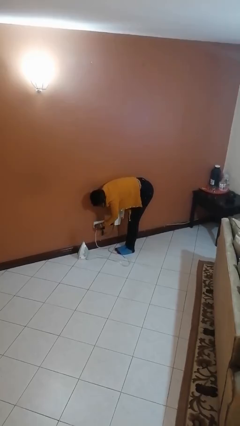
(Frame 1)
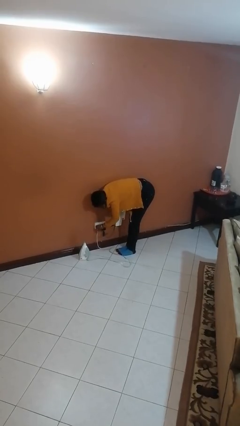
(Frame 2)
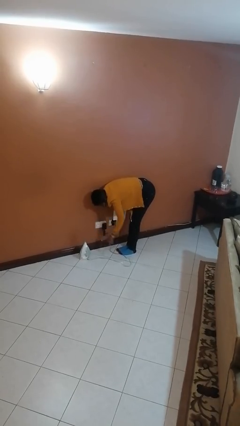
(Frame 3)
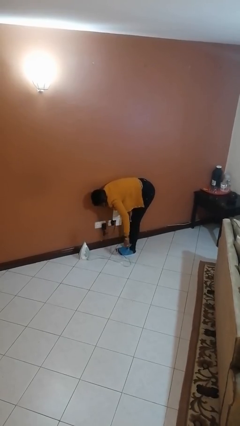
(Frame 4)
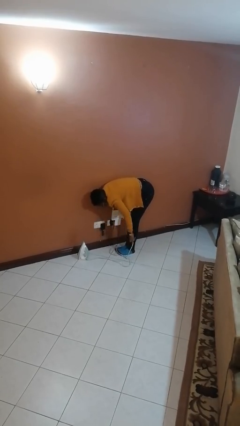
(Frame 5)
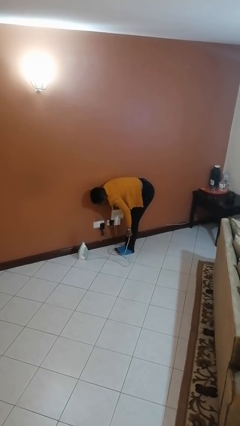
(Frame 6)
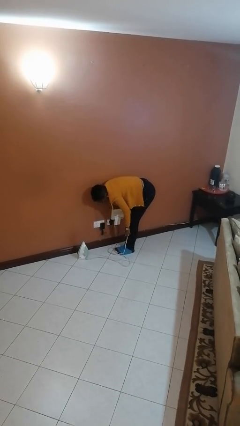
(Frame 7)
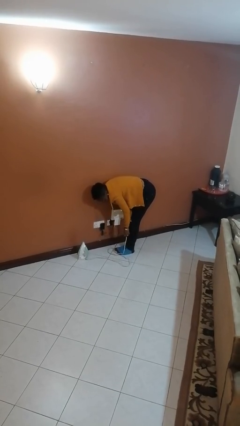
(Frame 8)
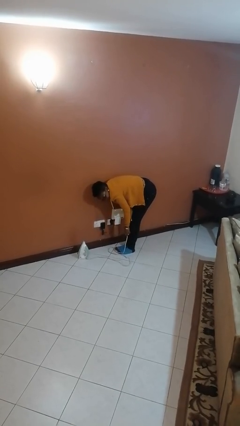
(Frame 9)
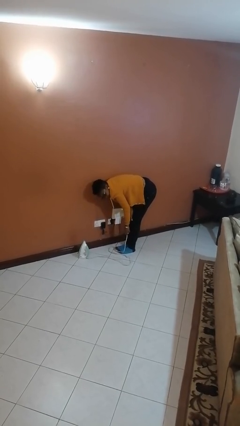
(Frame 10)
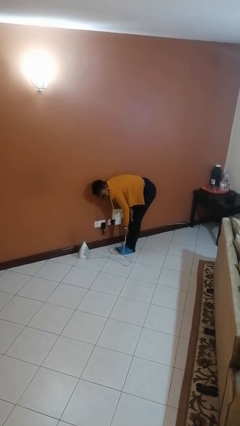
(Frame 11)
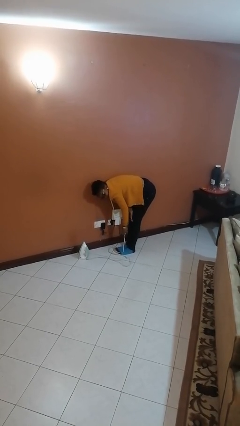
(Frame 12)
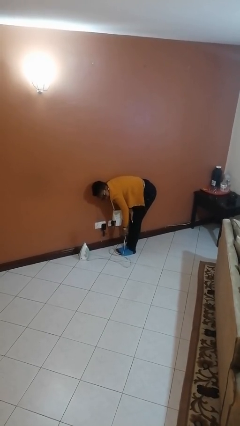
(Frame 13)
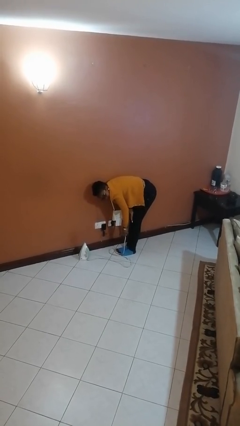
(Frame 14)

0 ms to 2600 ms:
person unplugs from electrical socket

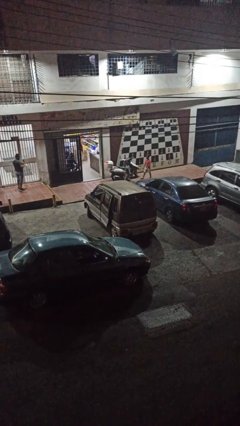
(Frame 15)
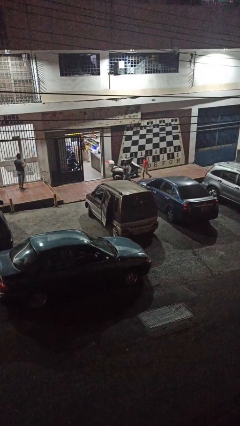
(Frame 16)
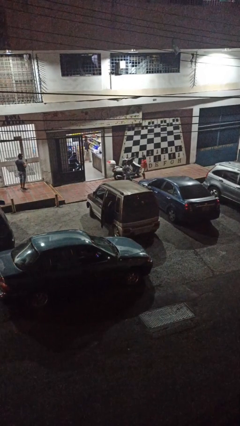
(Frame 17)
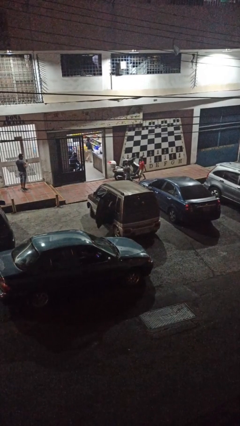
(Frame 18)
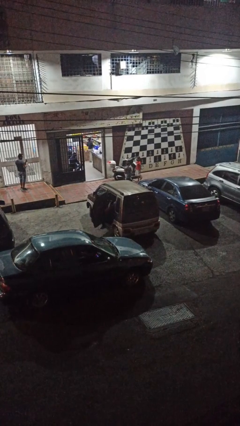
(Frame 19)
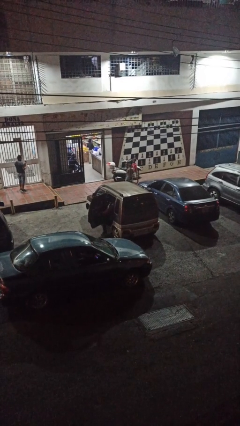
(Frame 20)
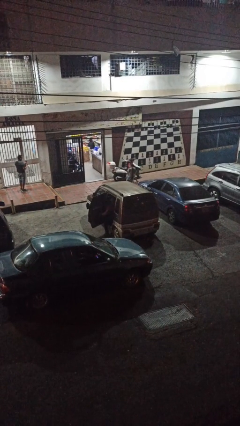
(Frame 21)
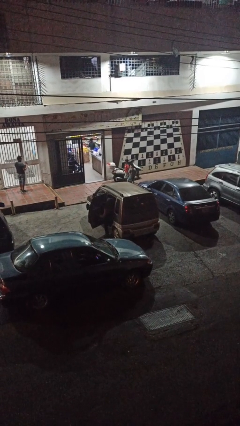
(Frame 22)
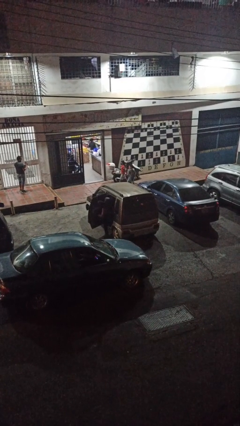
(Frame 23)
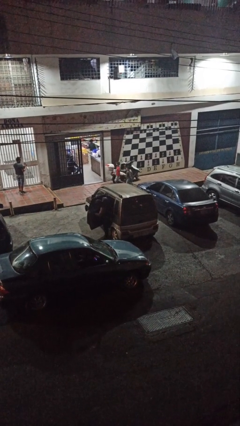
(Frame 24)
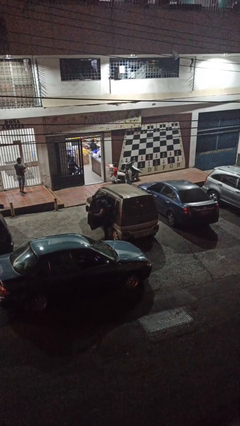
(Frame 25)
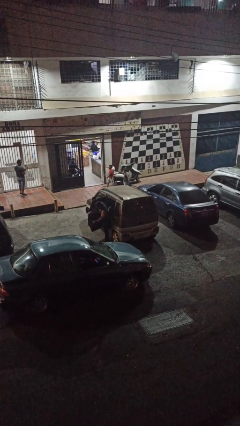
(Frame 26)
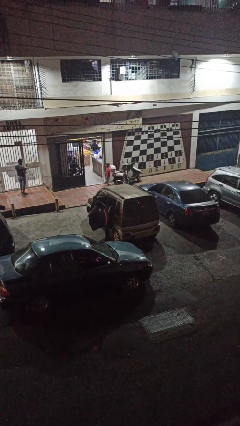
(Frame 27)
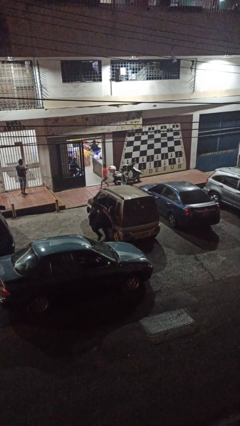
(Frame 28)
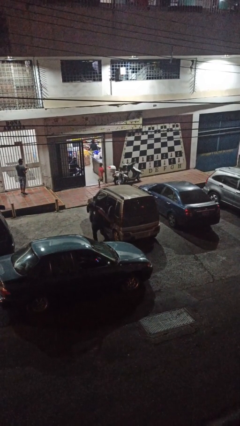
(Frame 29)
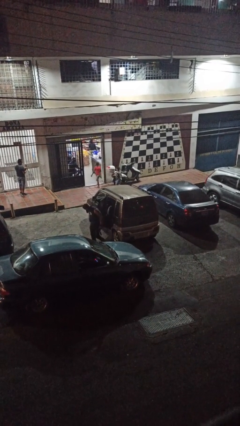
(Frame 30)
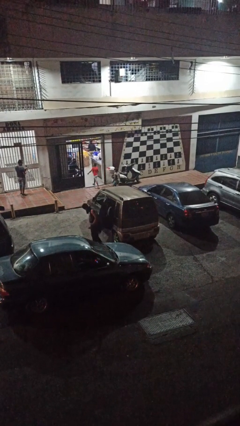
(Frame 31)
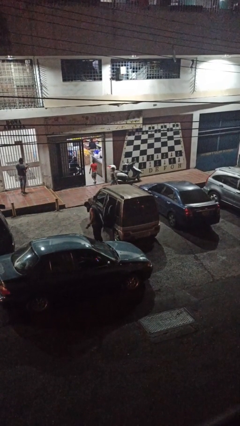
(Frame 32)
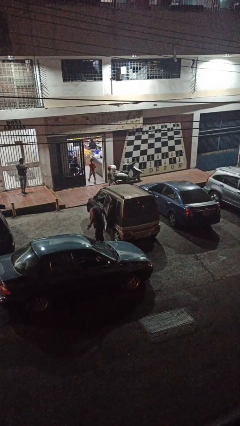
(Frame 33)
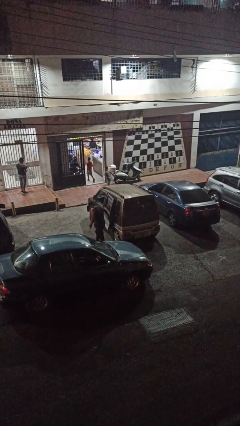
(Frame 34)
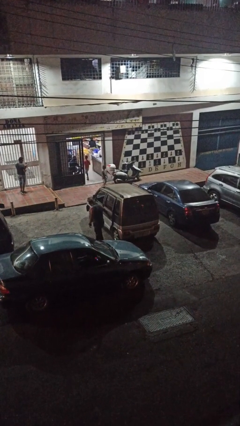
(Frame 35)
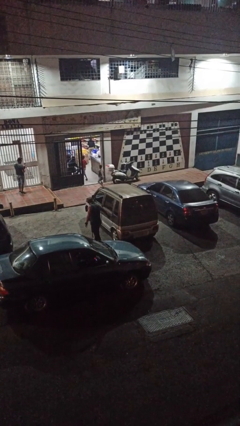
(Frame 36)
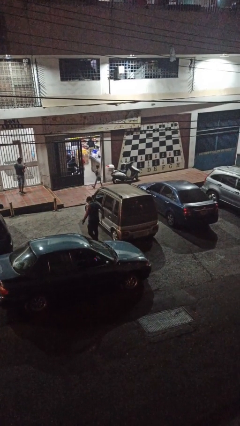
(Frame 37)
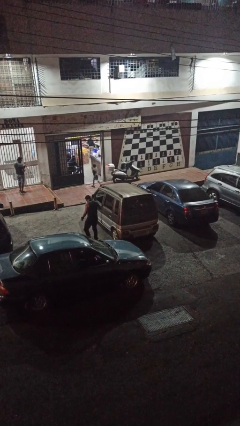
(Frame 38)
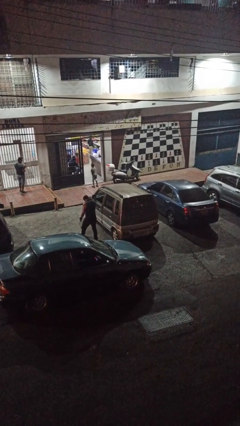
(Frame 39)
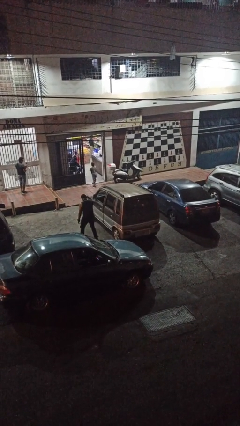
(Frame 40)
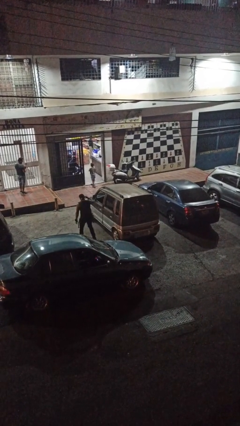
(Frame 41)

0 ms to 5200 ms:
car drops off person

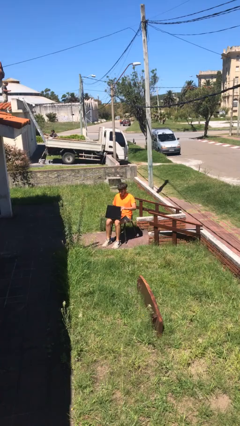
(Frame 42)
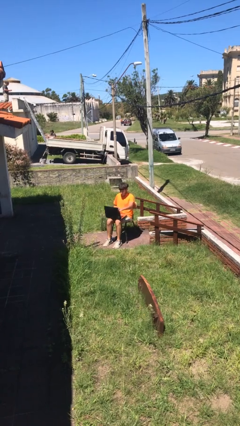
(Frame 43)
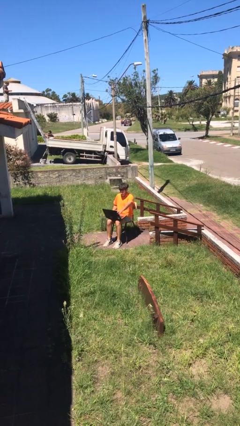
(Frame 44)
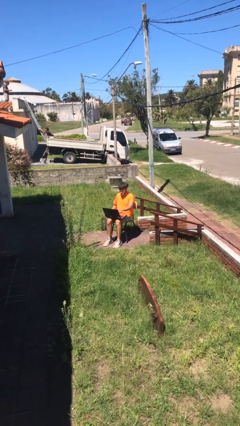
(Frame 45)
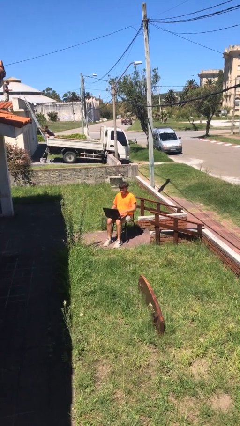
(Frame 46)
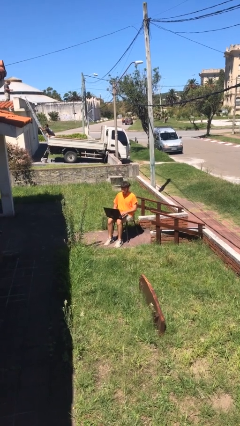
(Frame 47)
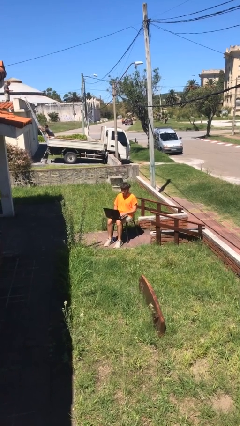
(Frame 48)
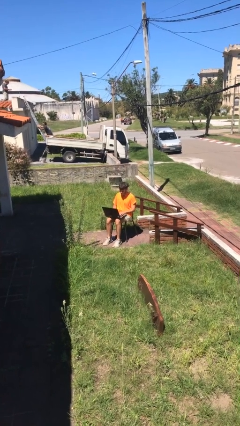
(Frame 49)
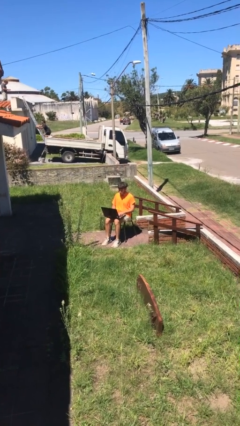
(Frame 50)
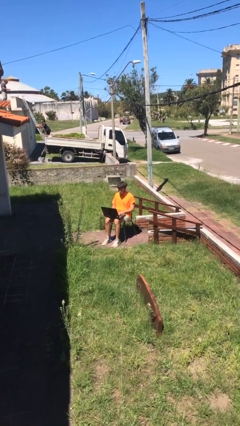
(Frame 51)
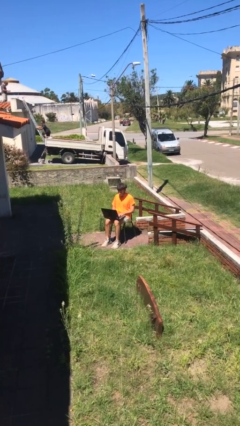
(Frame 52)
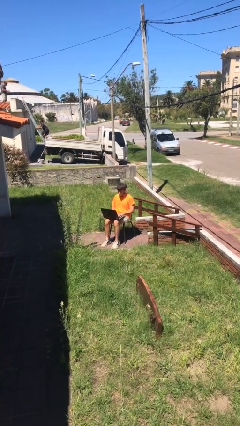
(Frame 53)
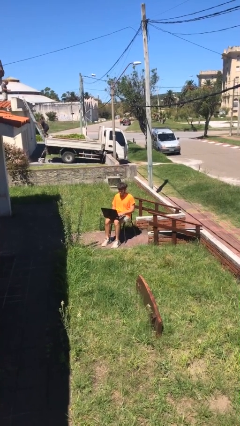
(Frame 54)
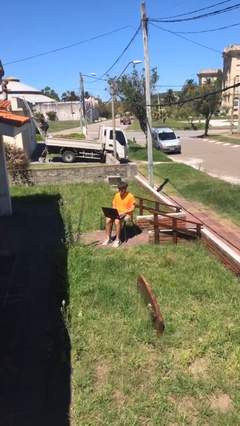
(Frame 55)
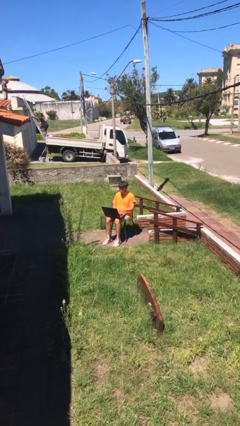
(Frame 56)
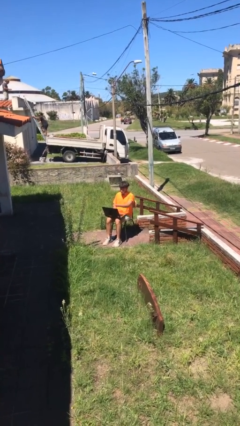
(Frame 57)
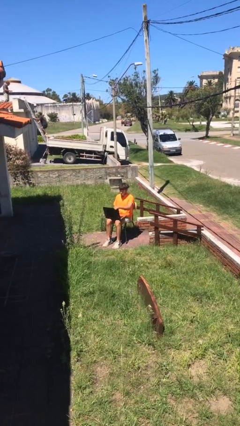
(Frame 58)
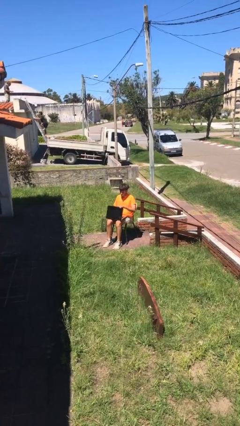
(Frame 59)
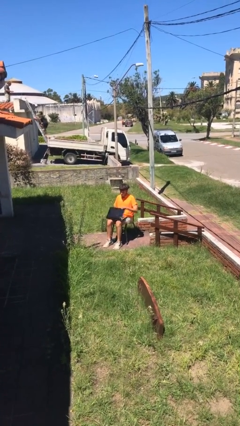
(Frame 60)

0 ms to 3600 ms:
person interacts with laptop

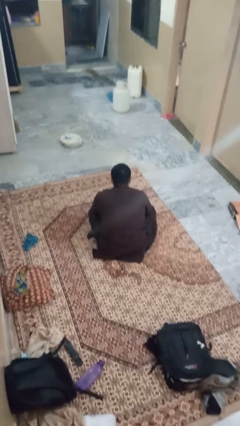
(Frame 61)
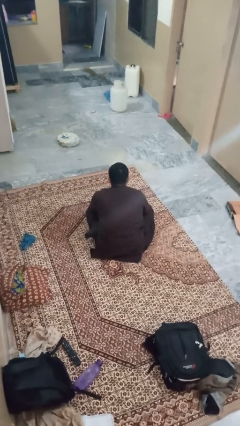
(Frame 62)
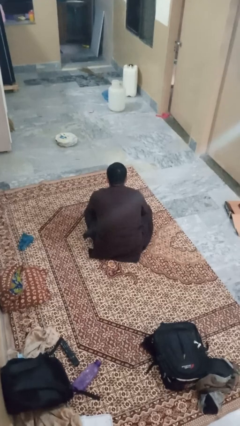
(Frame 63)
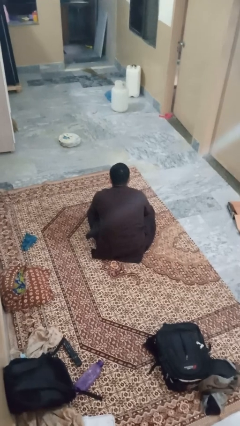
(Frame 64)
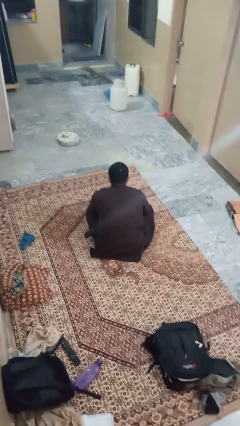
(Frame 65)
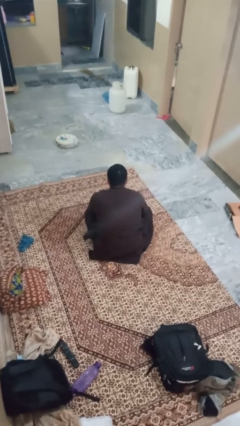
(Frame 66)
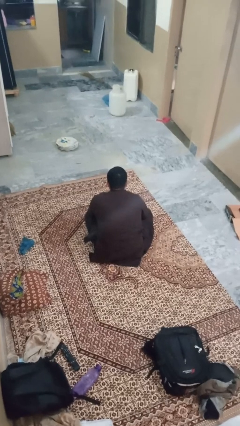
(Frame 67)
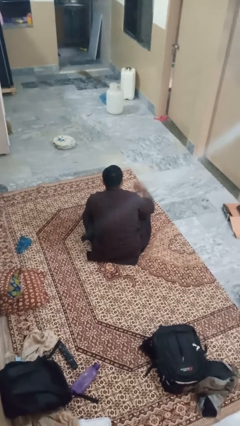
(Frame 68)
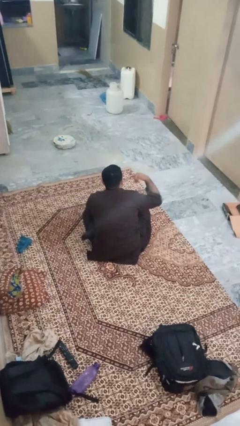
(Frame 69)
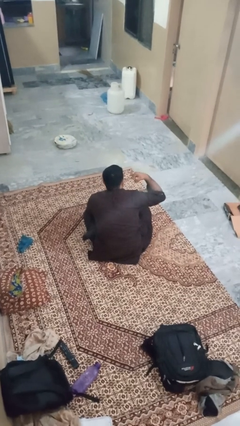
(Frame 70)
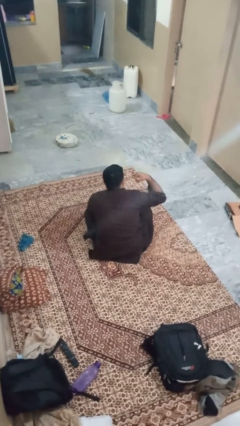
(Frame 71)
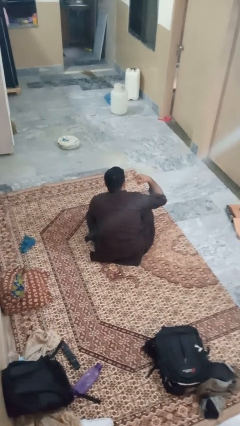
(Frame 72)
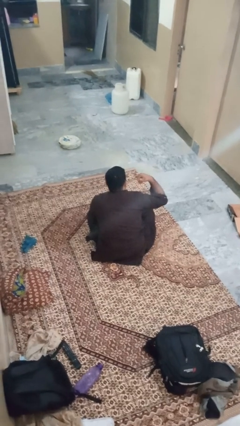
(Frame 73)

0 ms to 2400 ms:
person gestures call me

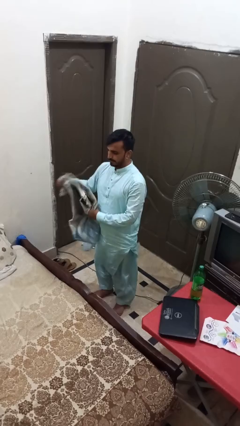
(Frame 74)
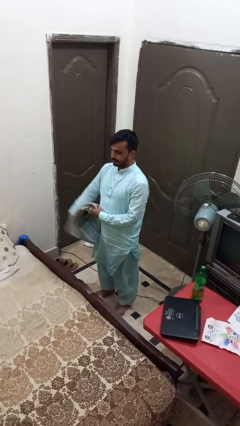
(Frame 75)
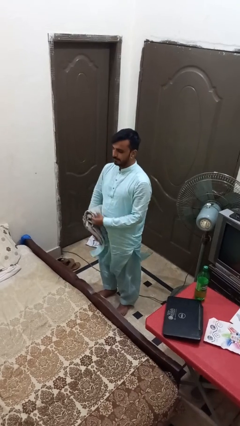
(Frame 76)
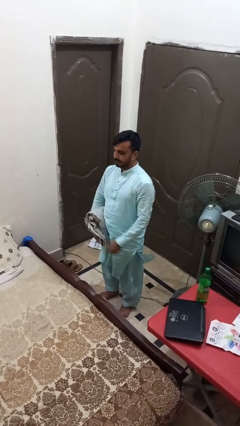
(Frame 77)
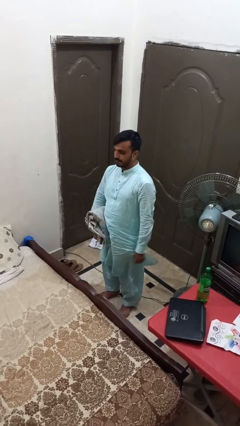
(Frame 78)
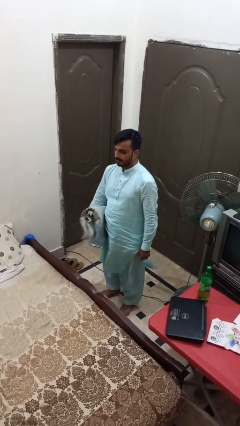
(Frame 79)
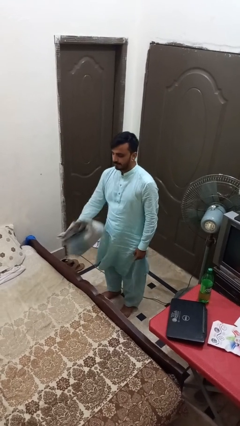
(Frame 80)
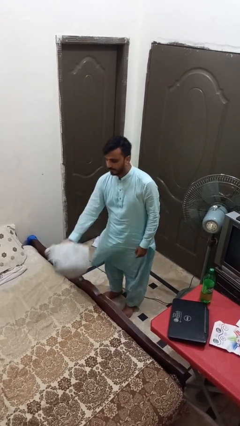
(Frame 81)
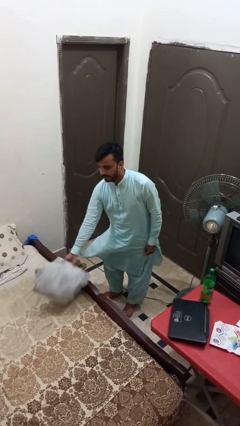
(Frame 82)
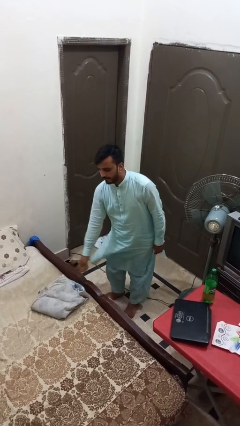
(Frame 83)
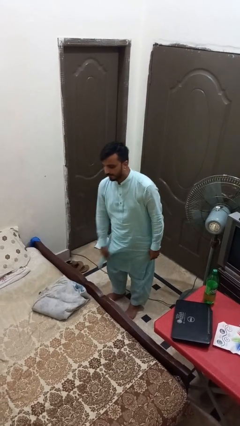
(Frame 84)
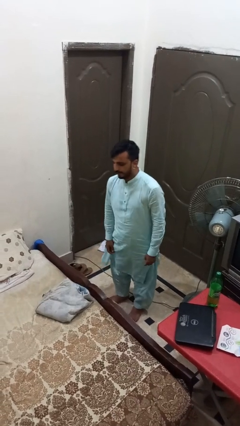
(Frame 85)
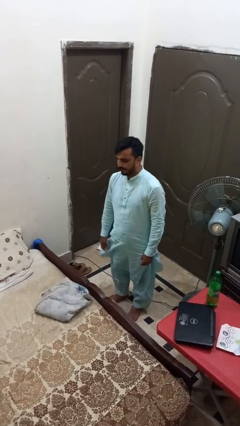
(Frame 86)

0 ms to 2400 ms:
person puts down object on bed

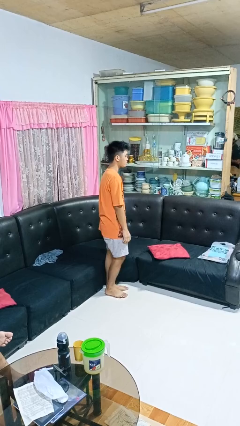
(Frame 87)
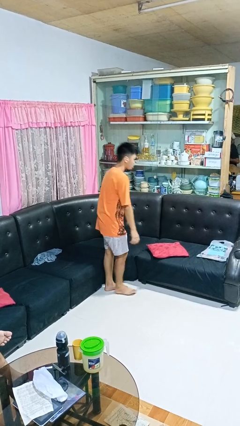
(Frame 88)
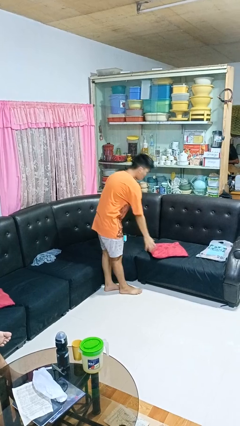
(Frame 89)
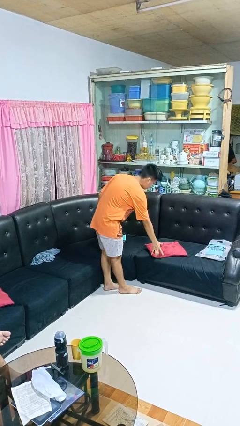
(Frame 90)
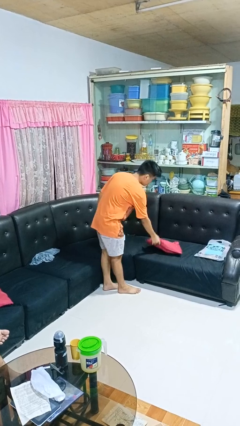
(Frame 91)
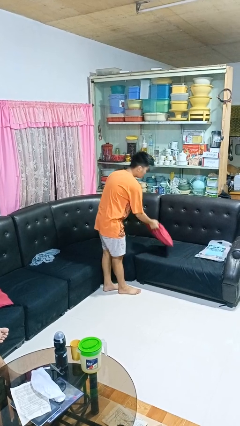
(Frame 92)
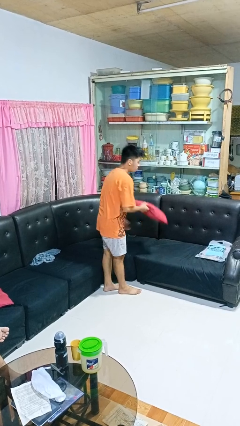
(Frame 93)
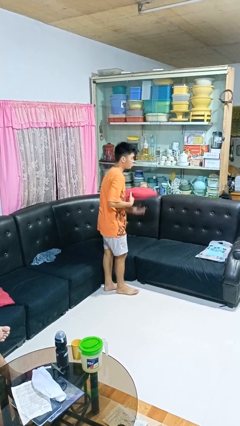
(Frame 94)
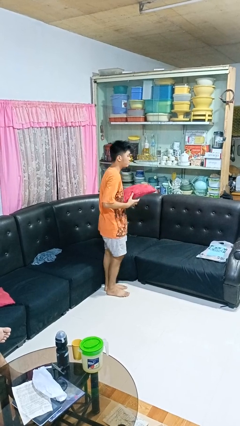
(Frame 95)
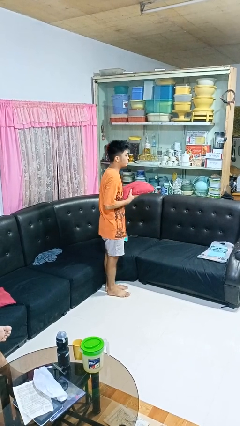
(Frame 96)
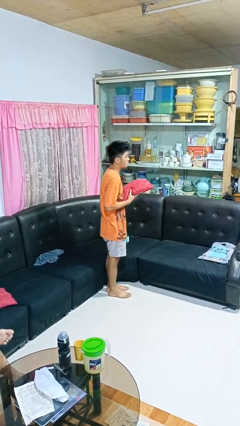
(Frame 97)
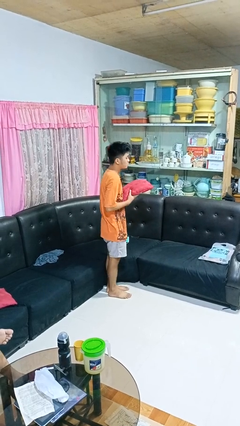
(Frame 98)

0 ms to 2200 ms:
person picks up object from couch
